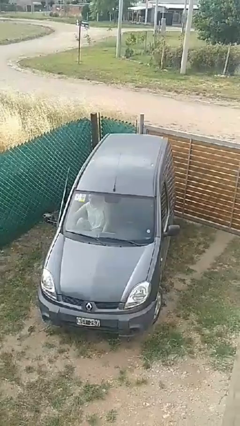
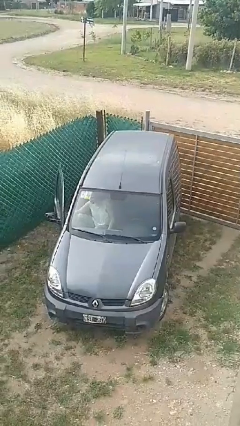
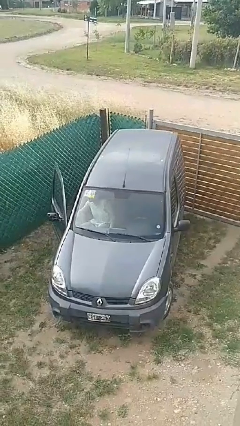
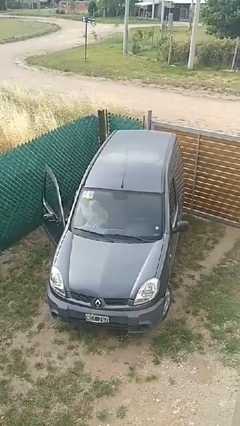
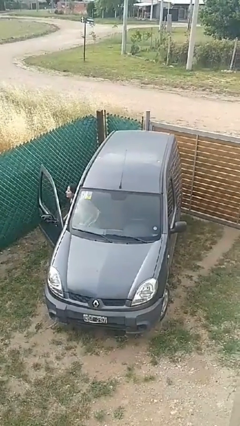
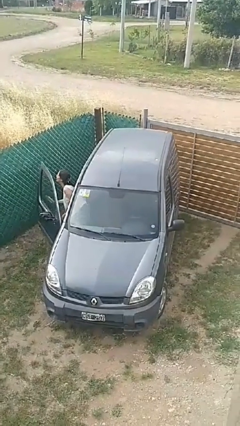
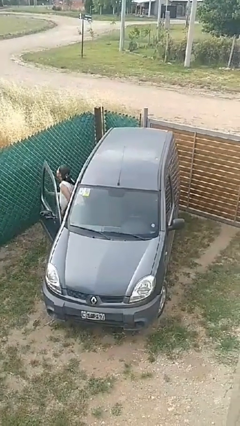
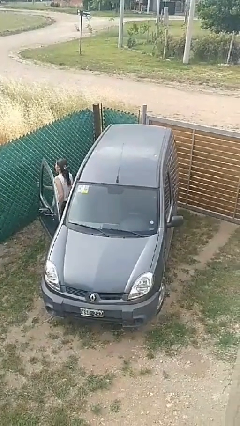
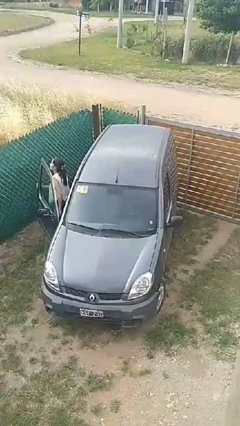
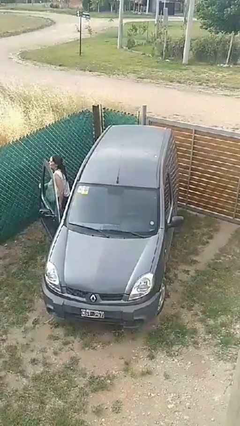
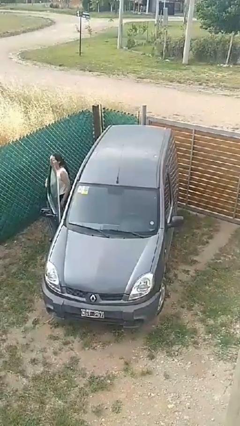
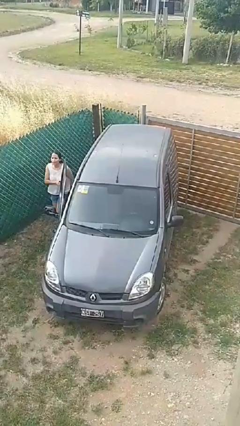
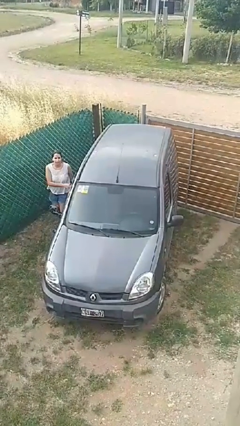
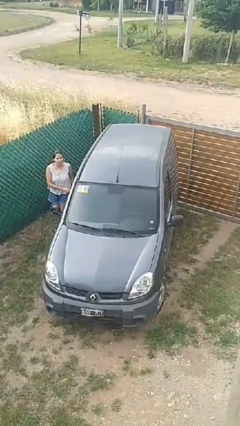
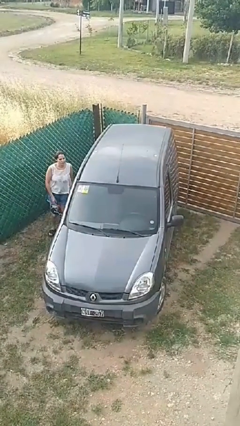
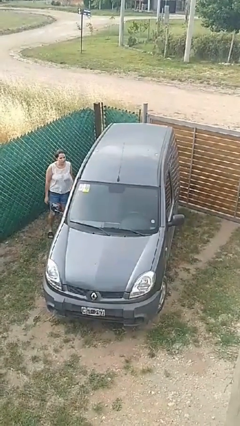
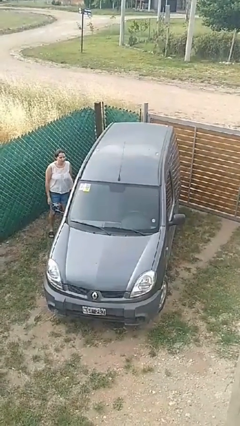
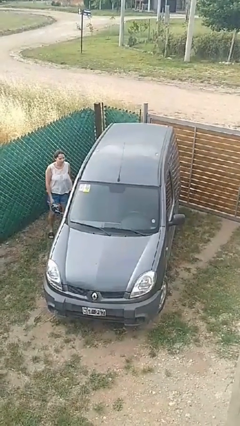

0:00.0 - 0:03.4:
car drops off person

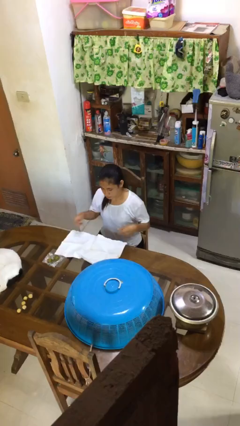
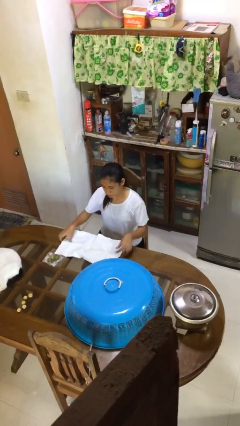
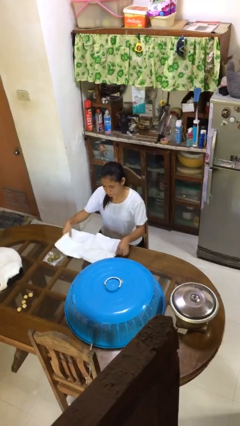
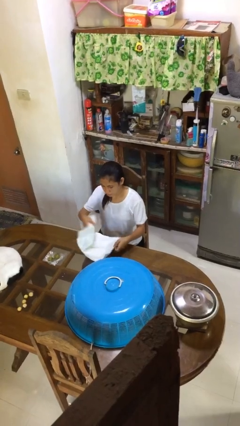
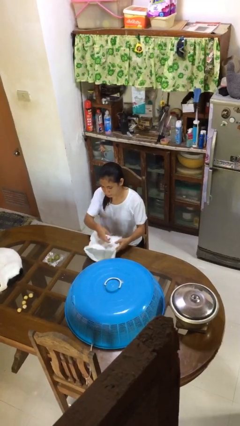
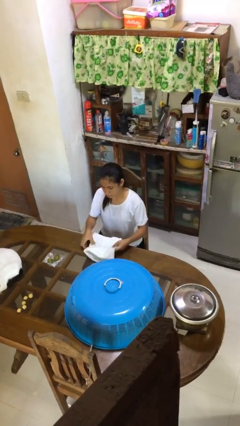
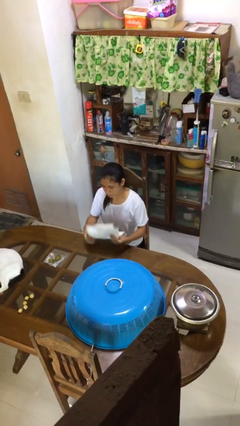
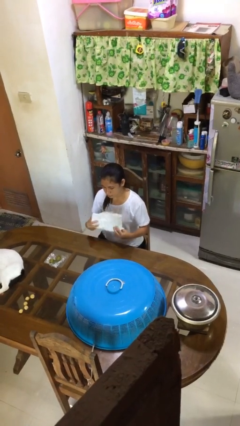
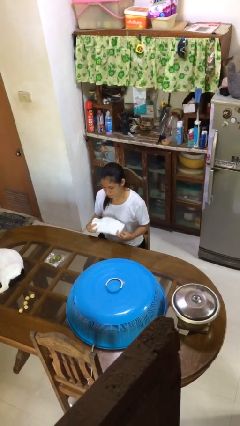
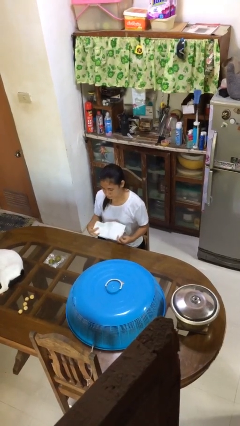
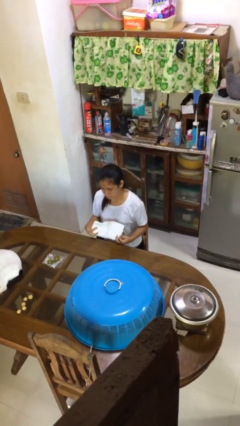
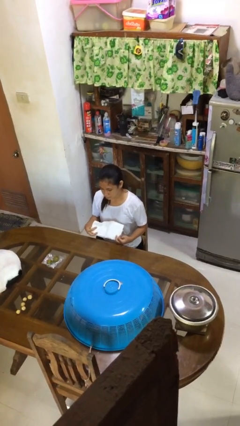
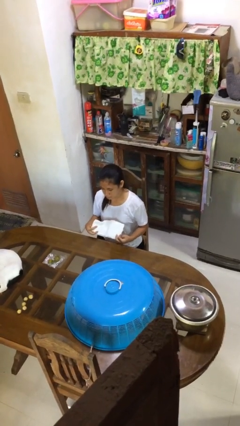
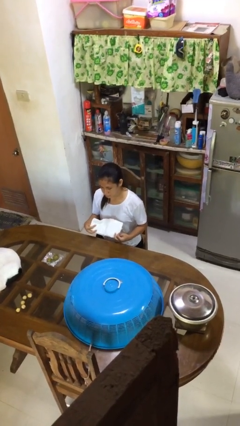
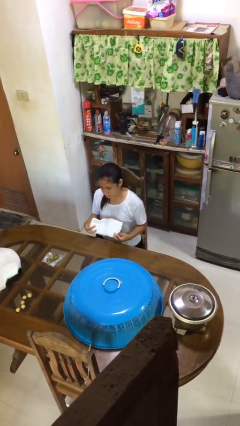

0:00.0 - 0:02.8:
person folds tablecloth

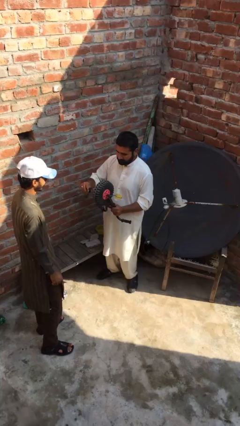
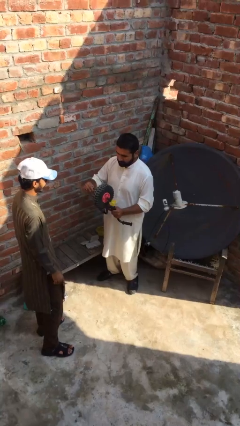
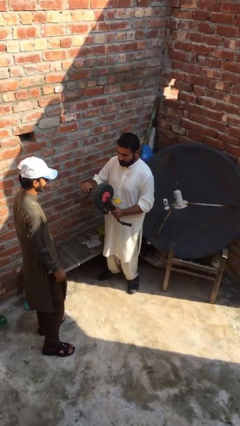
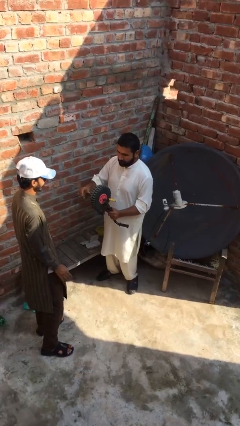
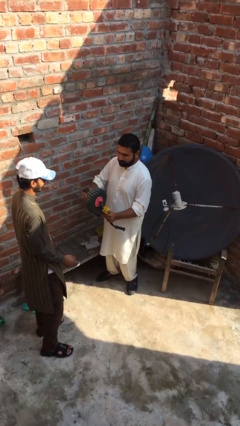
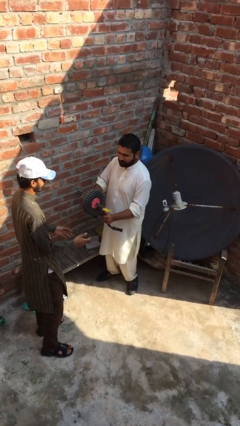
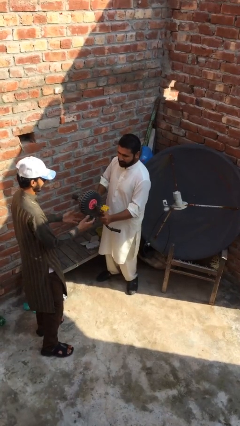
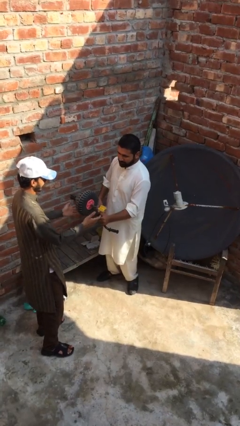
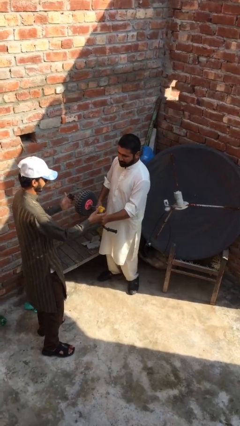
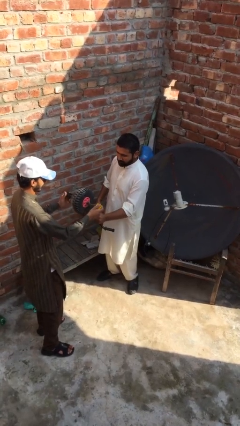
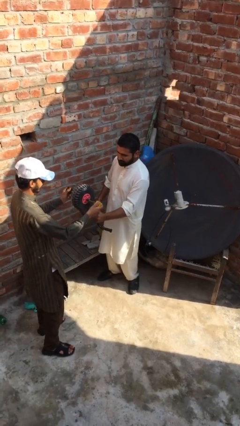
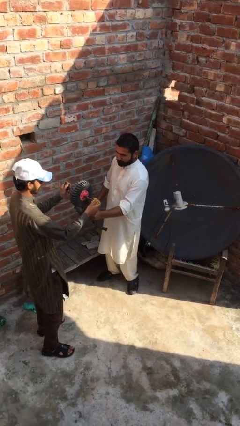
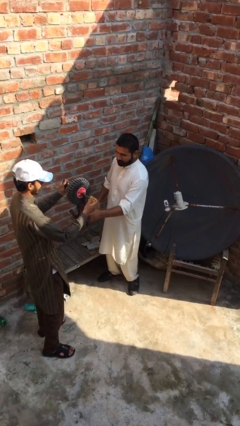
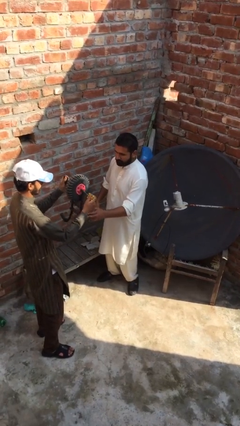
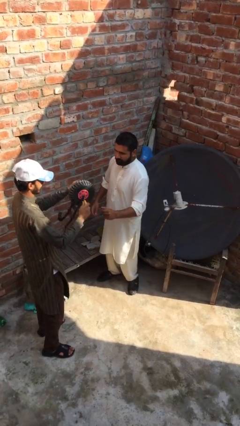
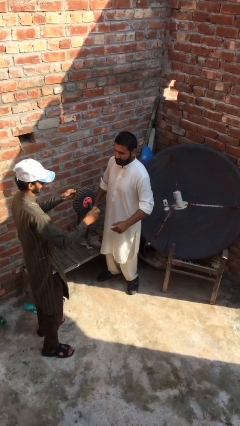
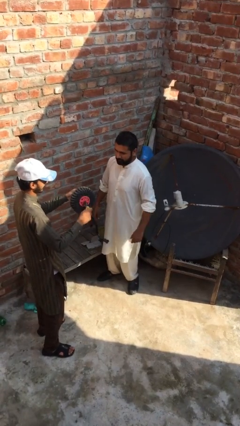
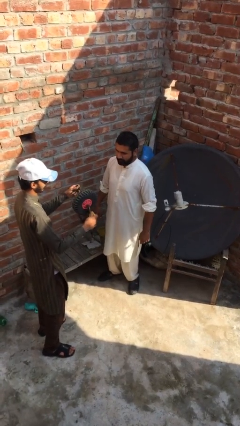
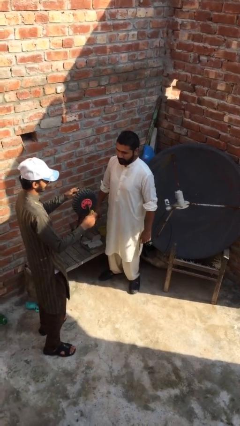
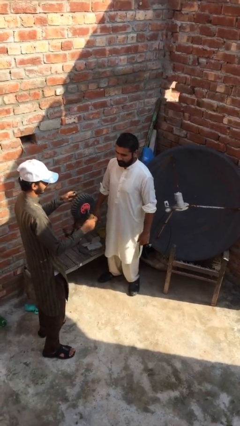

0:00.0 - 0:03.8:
person transfers object to person

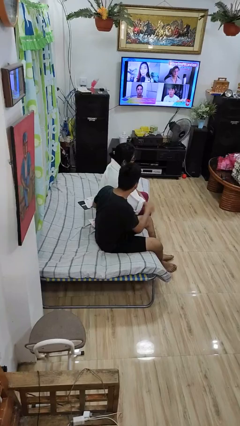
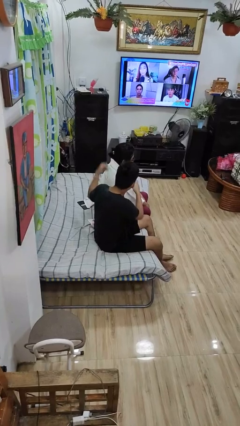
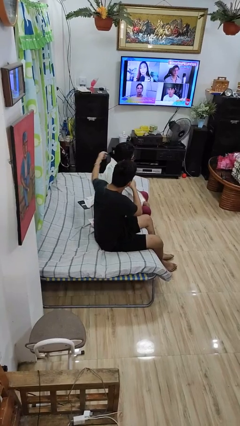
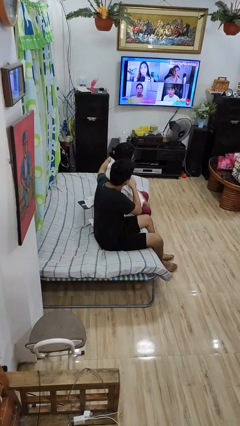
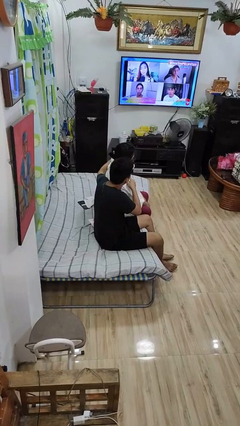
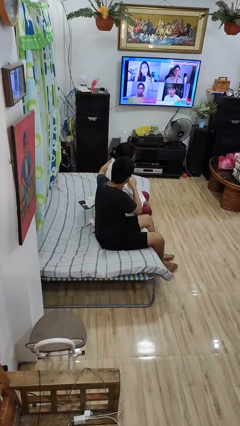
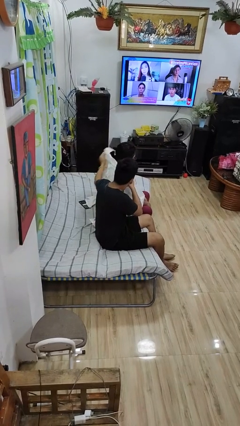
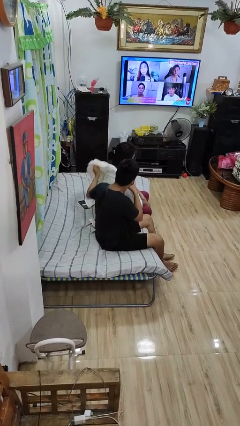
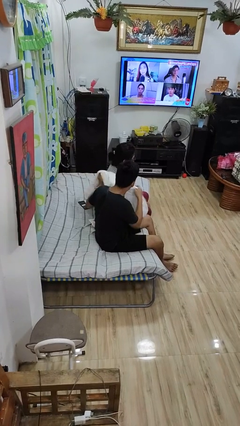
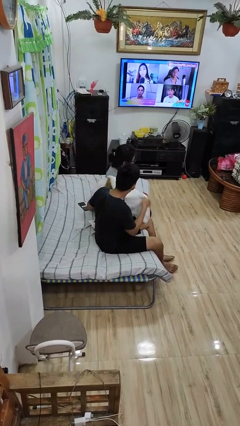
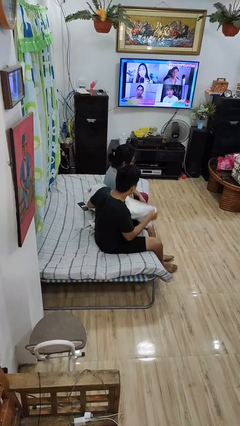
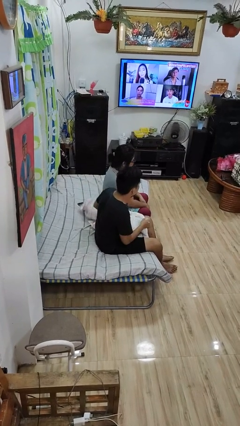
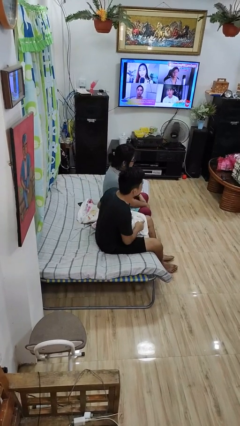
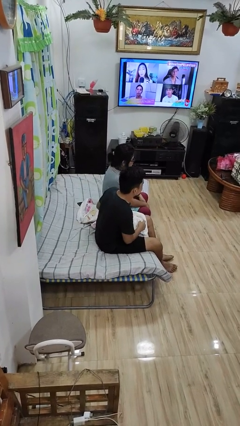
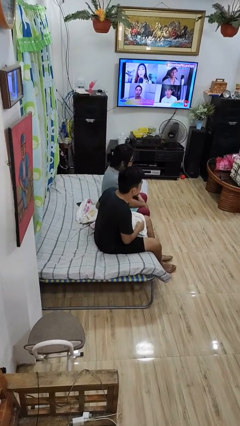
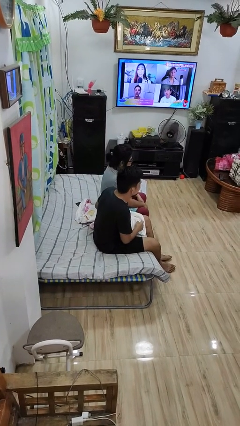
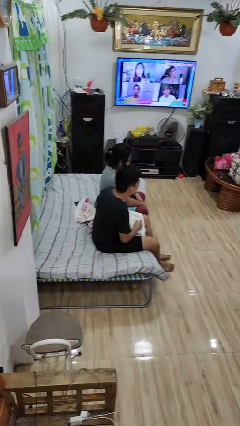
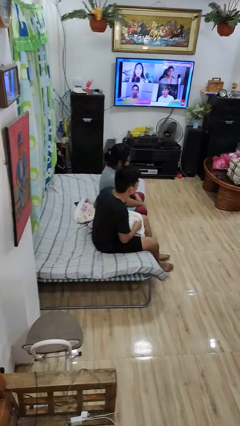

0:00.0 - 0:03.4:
person uncovers friend with blanket

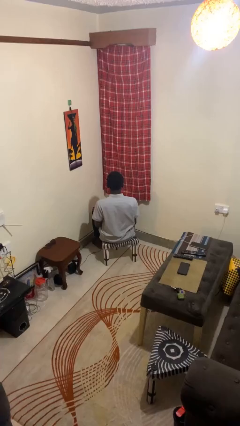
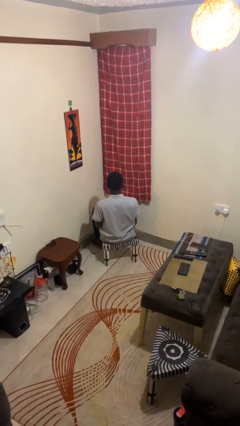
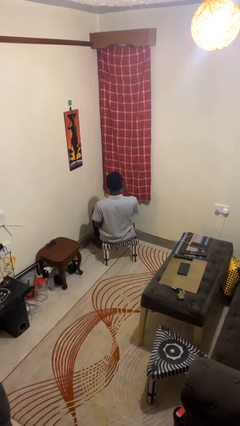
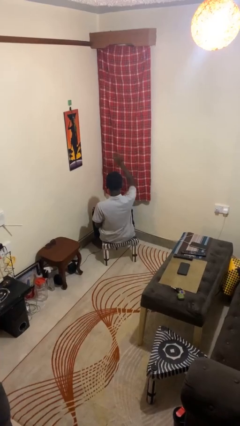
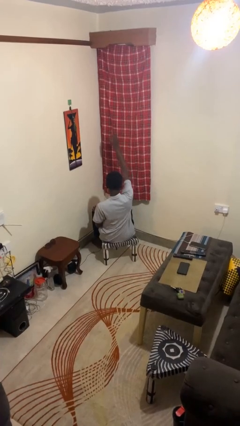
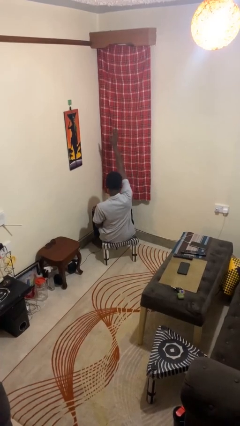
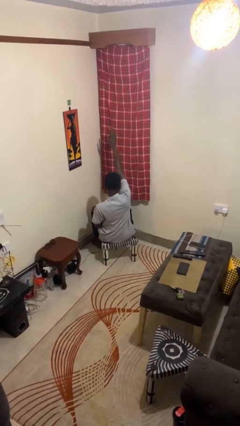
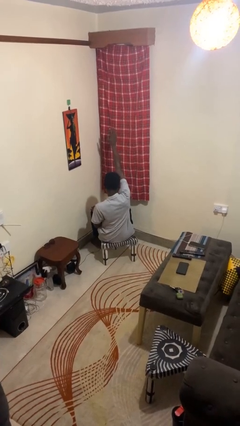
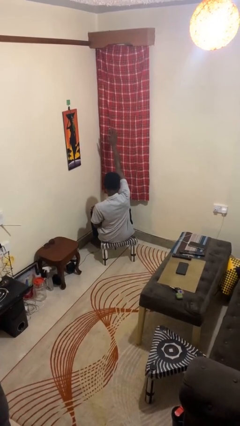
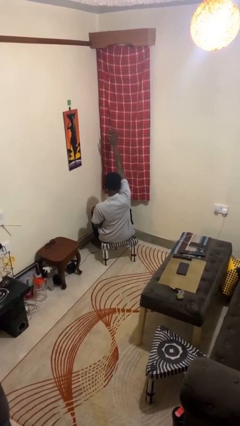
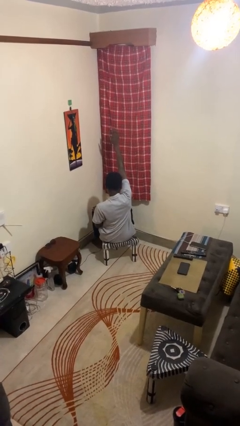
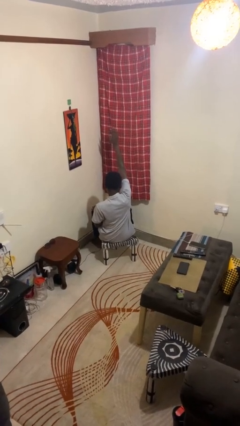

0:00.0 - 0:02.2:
person gestures raise hand

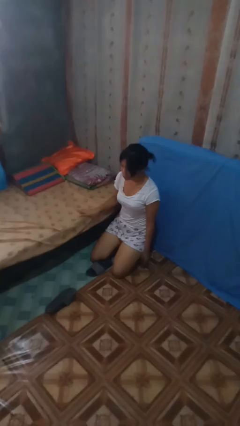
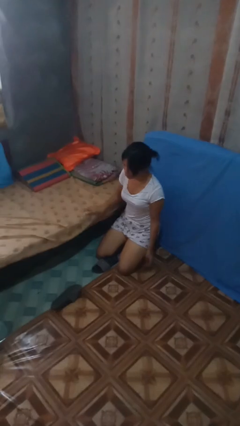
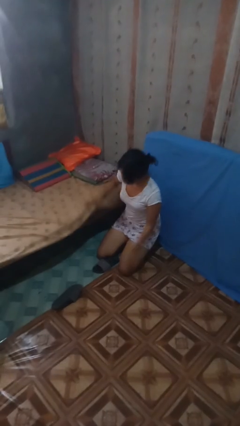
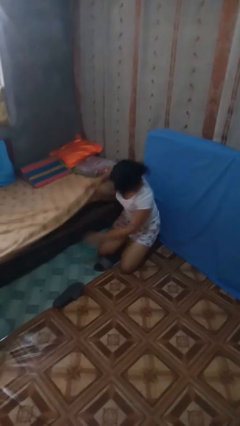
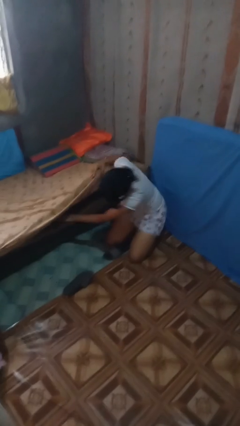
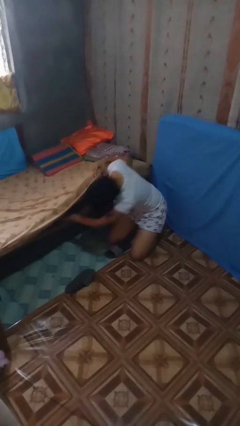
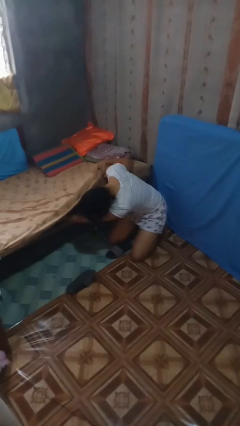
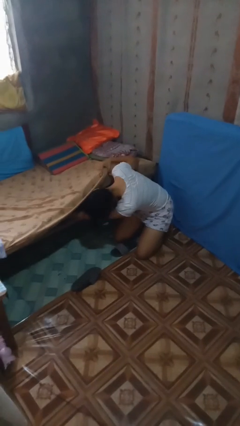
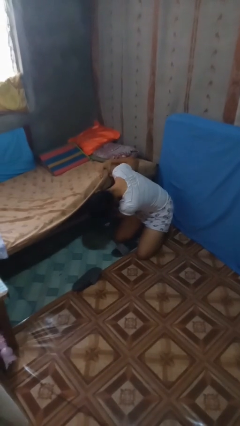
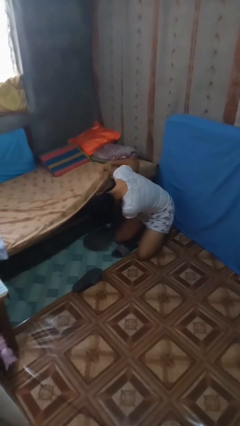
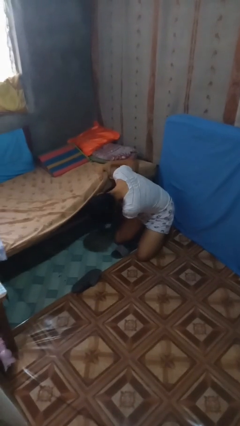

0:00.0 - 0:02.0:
person searches under bed
